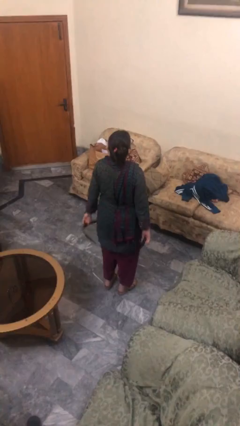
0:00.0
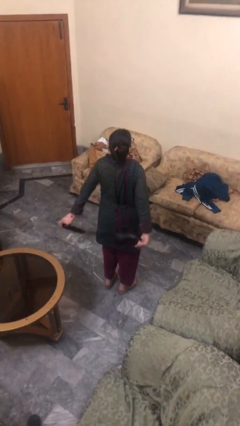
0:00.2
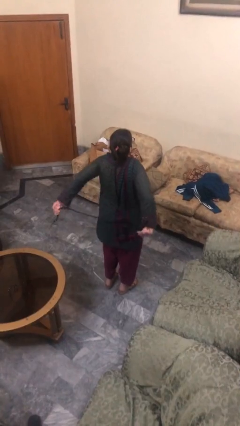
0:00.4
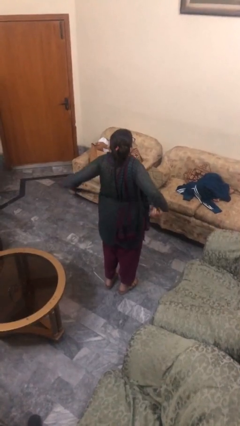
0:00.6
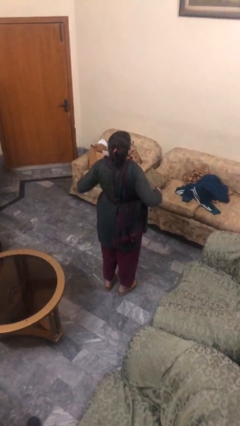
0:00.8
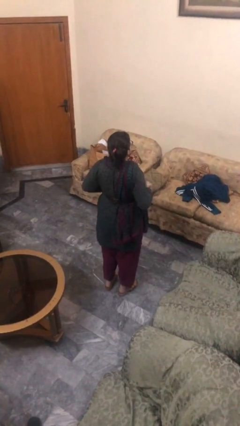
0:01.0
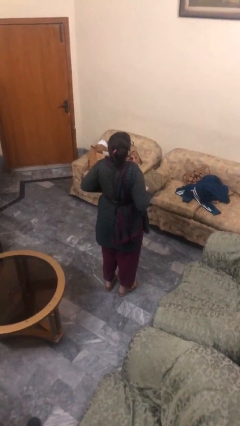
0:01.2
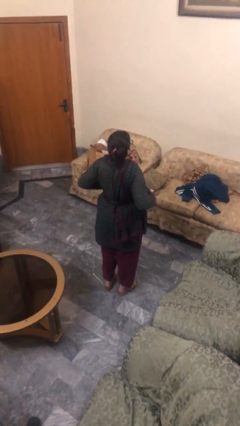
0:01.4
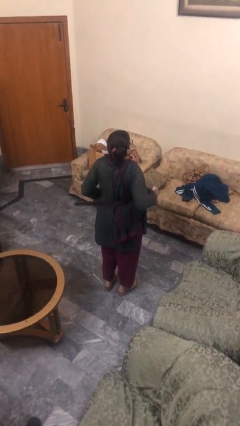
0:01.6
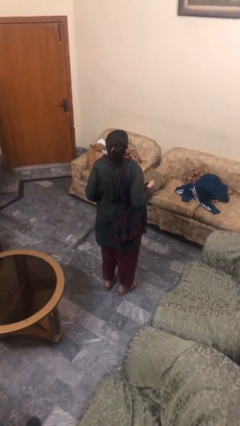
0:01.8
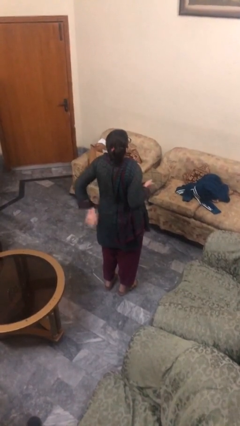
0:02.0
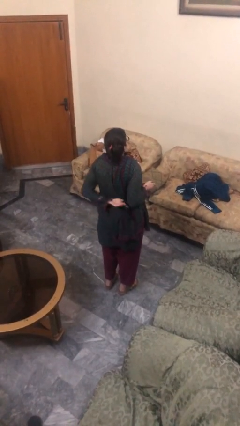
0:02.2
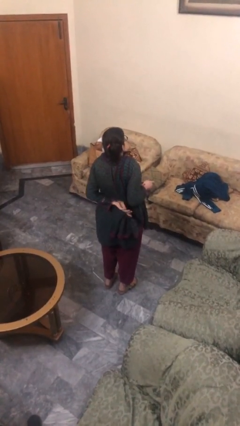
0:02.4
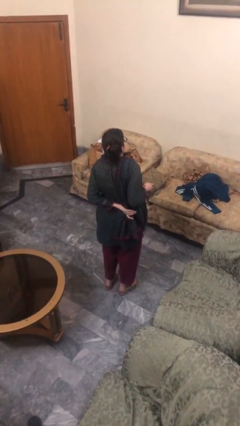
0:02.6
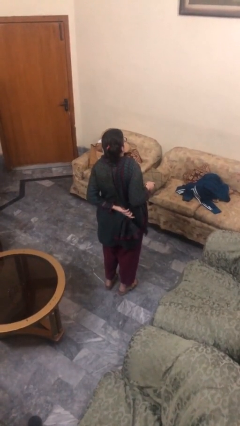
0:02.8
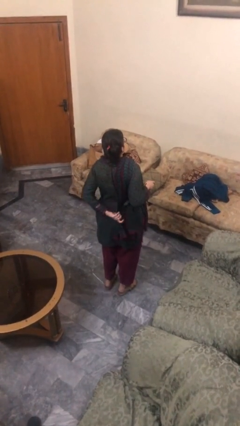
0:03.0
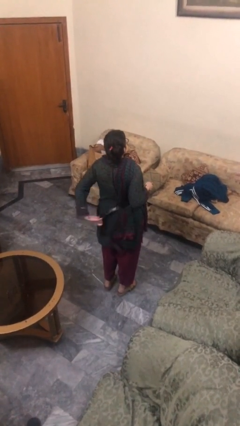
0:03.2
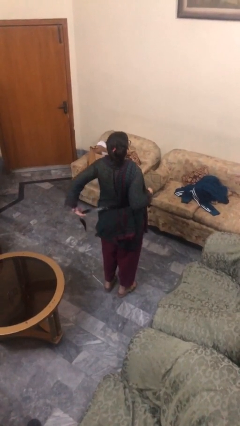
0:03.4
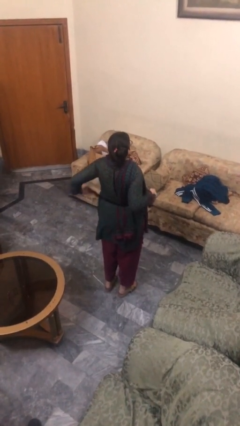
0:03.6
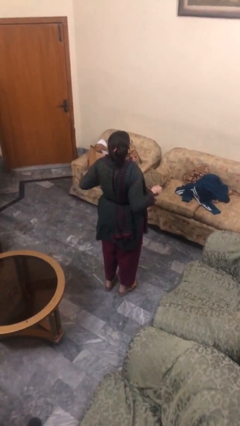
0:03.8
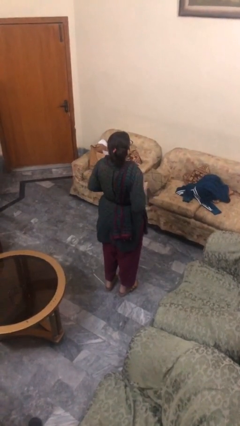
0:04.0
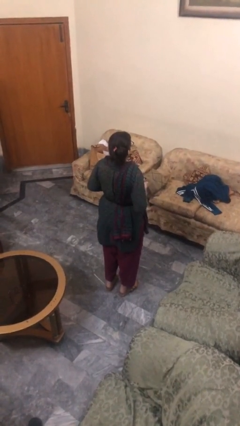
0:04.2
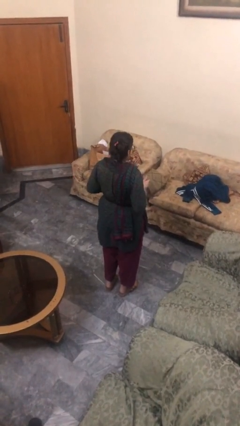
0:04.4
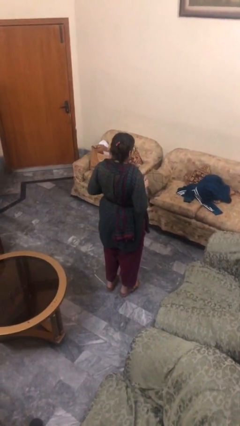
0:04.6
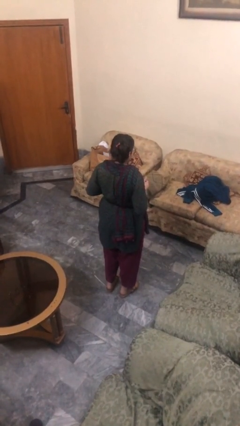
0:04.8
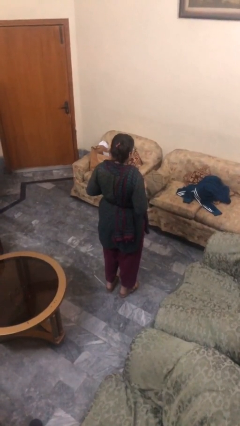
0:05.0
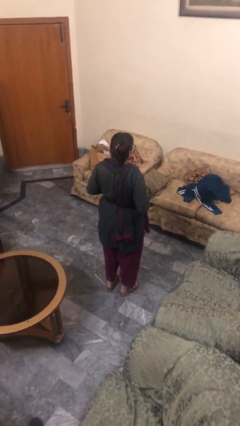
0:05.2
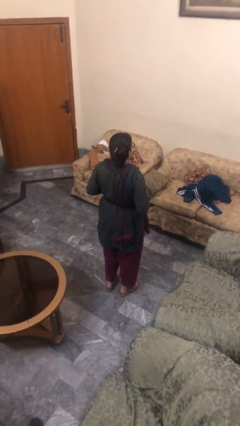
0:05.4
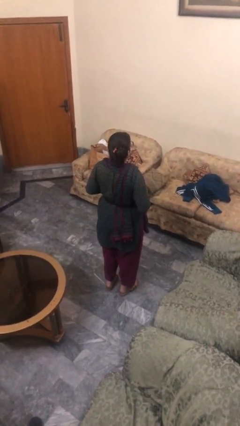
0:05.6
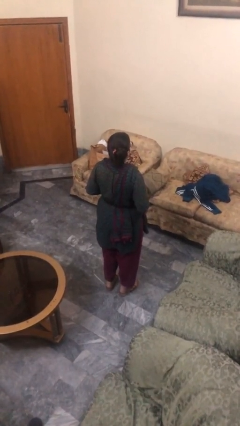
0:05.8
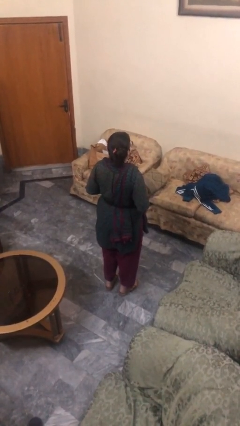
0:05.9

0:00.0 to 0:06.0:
person puts on belt

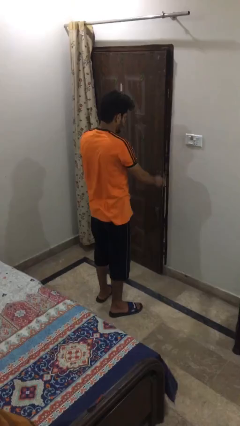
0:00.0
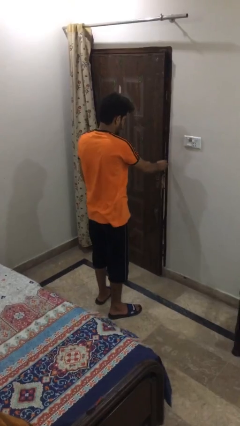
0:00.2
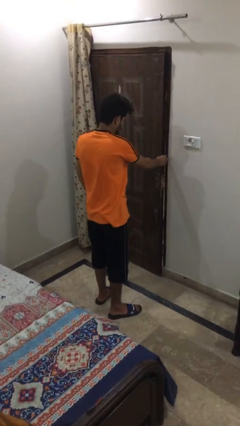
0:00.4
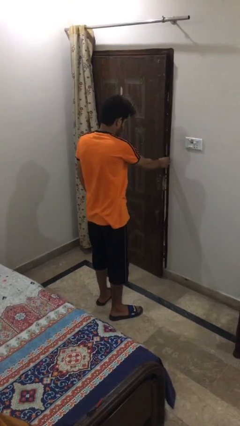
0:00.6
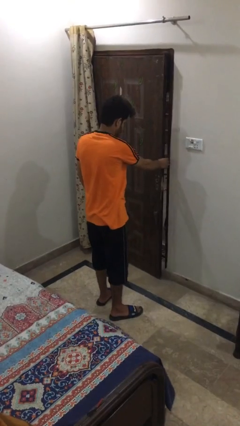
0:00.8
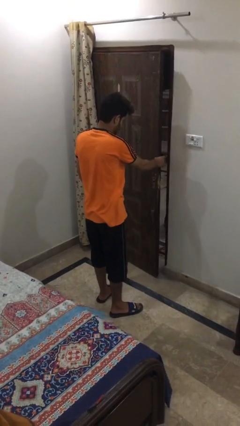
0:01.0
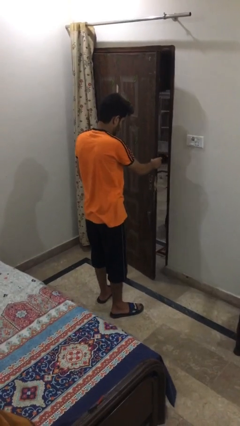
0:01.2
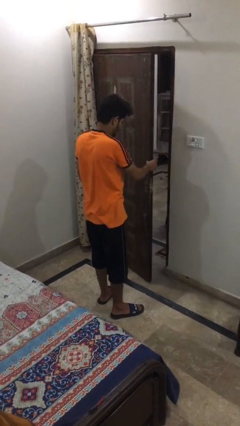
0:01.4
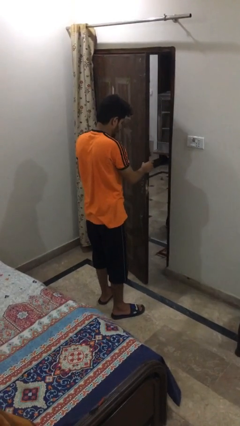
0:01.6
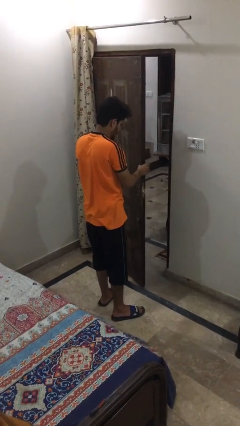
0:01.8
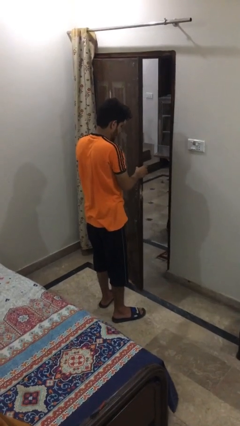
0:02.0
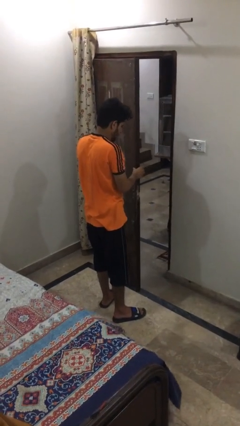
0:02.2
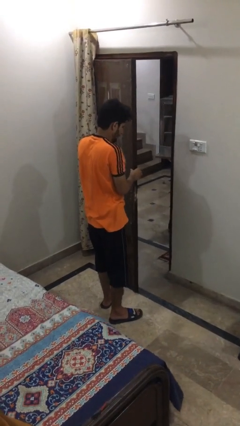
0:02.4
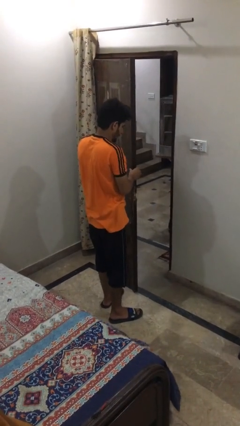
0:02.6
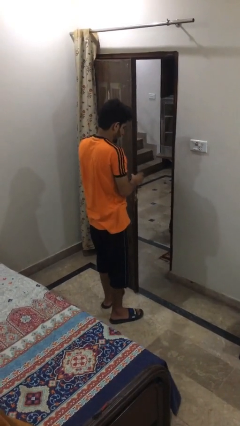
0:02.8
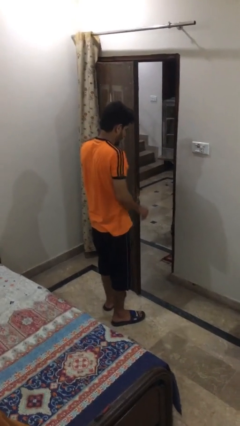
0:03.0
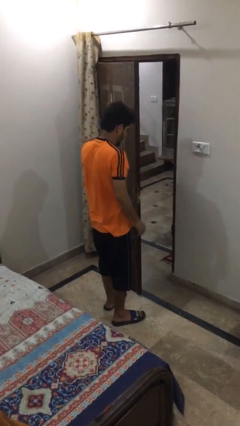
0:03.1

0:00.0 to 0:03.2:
person opens facility door

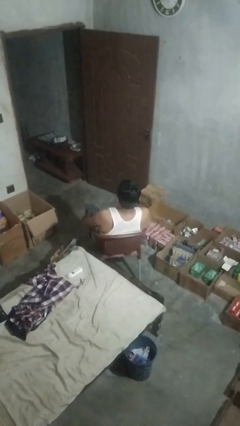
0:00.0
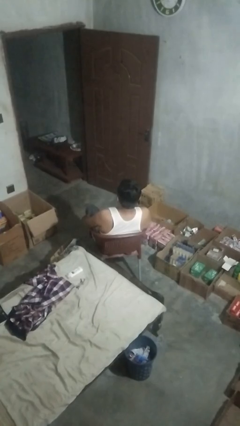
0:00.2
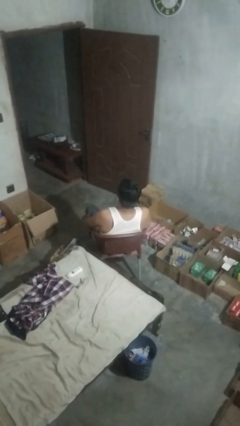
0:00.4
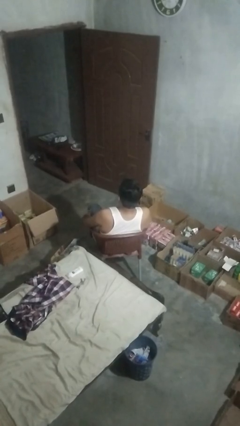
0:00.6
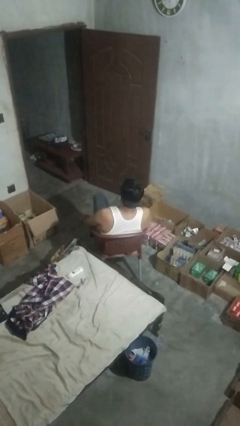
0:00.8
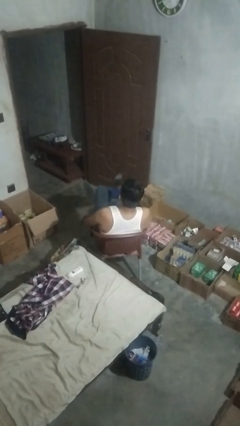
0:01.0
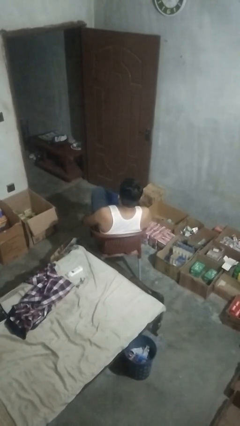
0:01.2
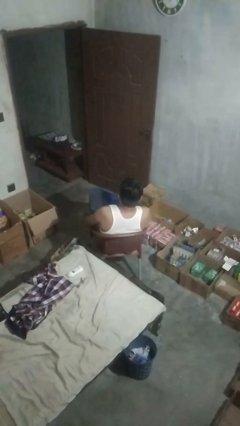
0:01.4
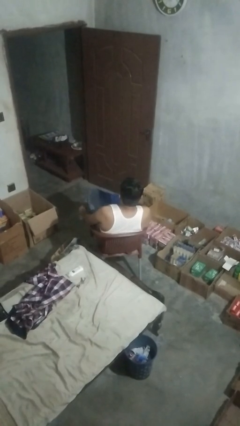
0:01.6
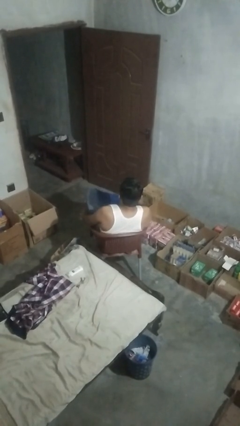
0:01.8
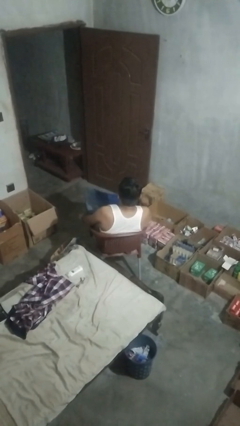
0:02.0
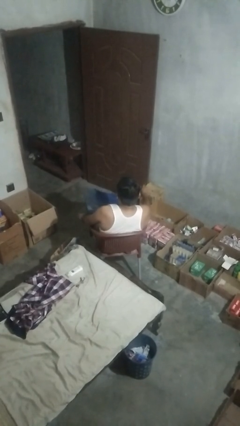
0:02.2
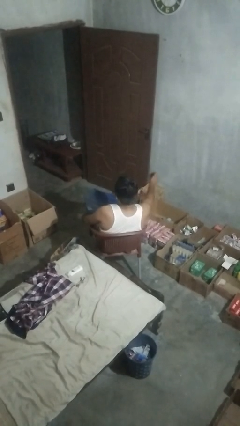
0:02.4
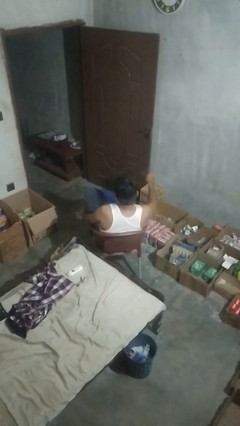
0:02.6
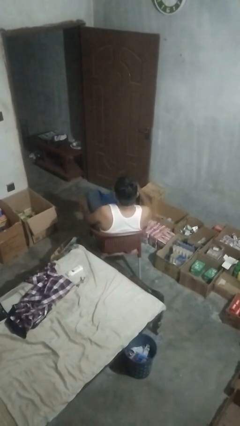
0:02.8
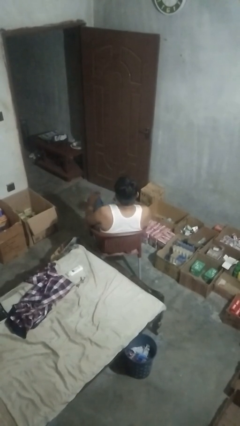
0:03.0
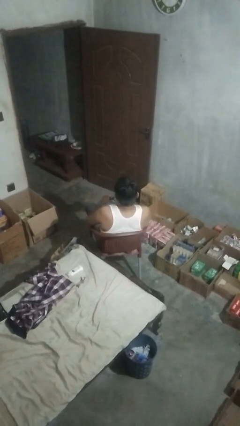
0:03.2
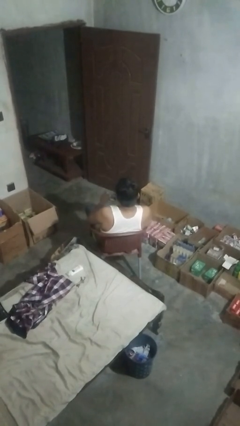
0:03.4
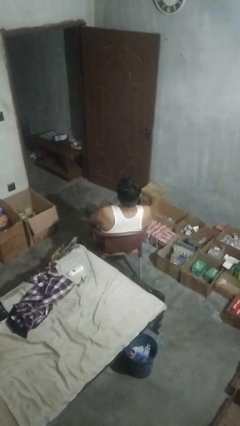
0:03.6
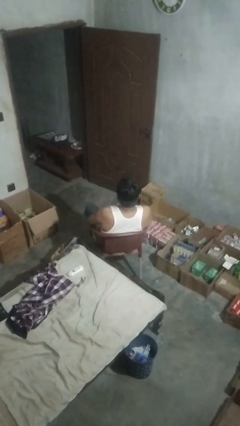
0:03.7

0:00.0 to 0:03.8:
person takes off socks

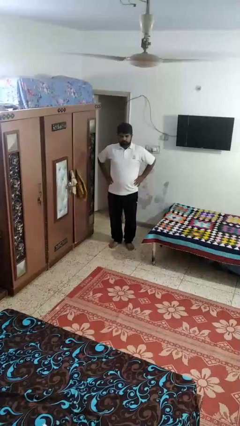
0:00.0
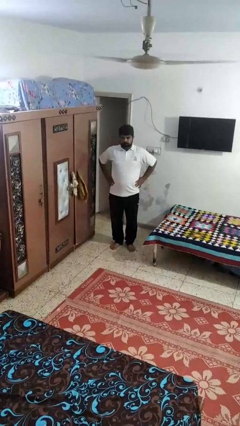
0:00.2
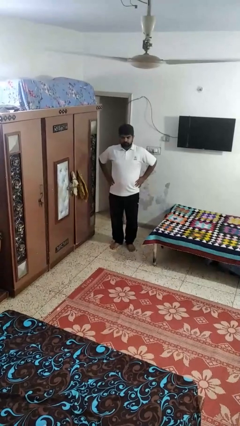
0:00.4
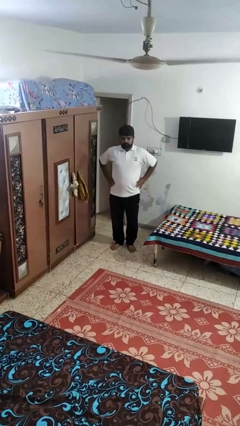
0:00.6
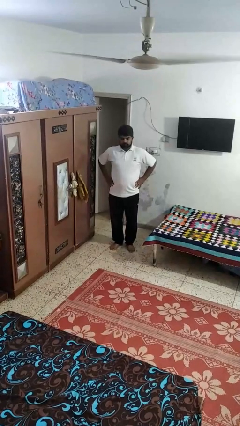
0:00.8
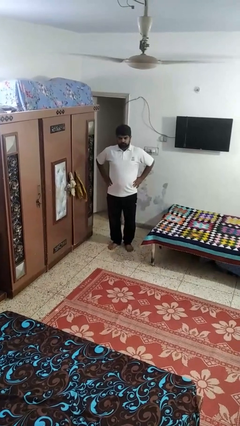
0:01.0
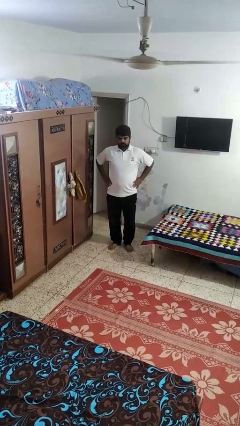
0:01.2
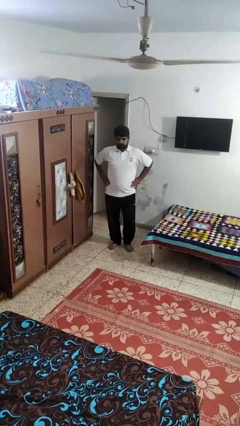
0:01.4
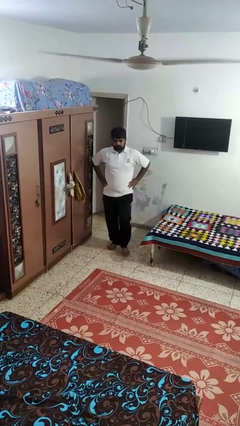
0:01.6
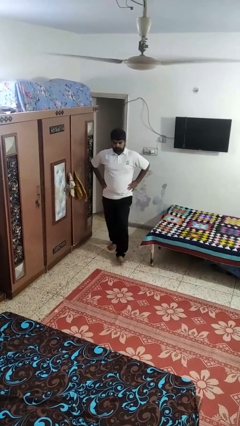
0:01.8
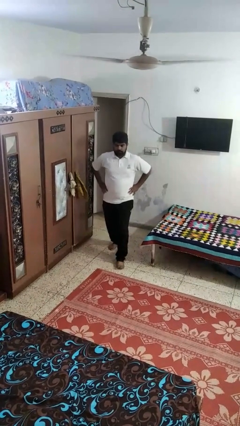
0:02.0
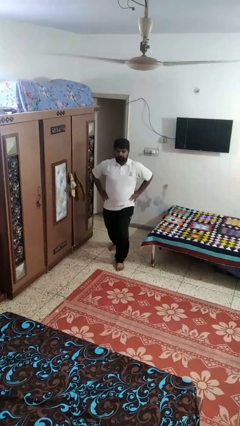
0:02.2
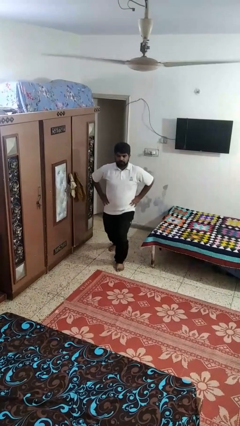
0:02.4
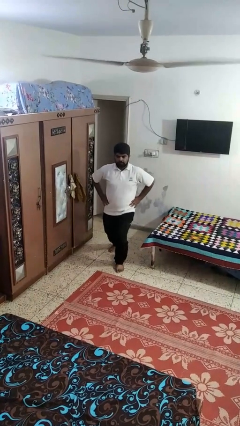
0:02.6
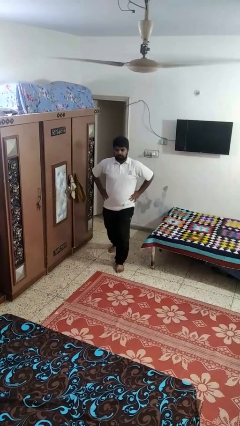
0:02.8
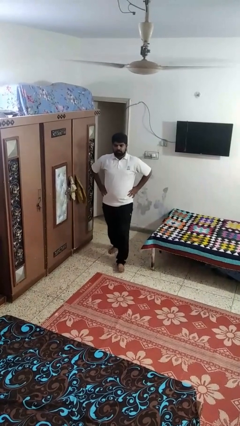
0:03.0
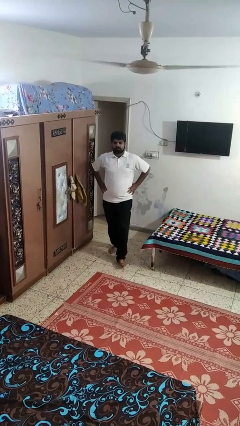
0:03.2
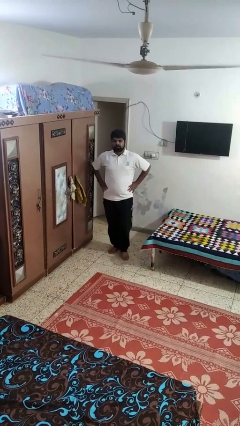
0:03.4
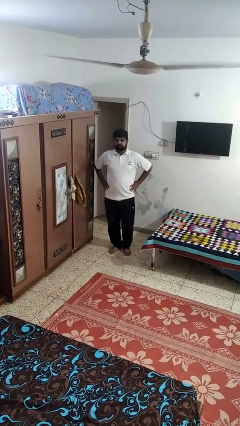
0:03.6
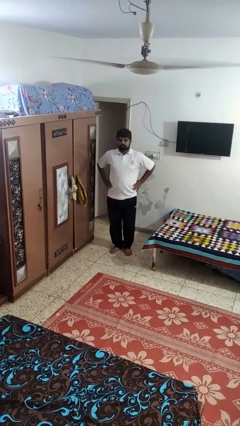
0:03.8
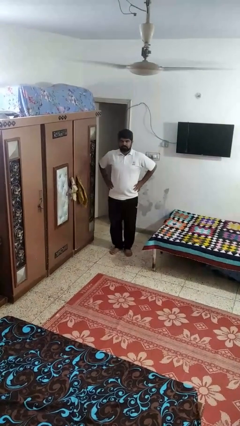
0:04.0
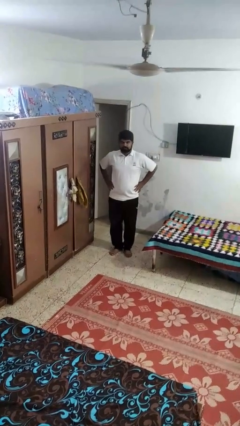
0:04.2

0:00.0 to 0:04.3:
person exercises with lunges

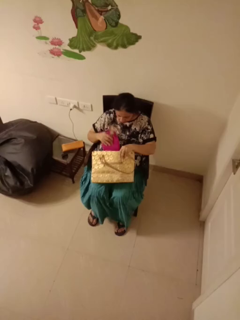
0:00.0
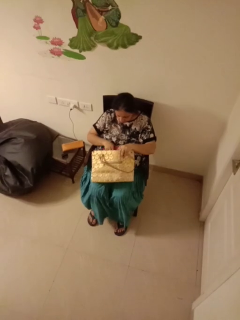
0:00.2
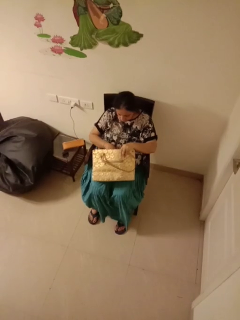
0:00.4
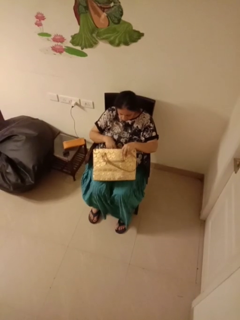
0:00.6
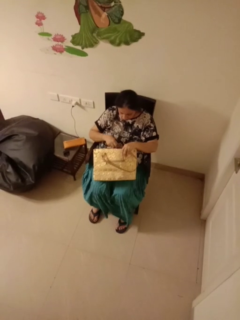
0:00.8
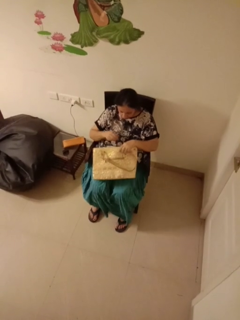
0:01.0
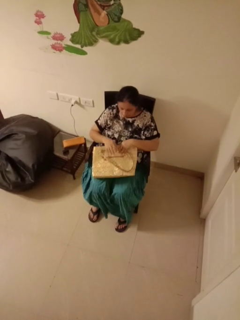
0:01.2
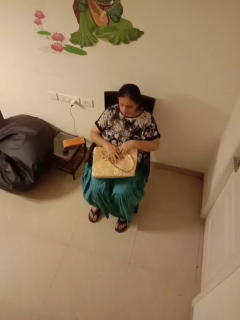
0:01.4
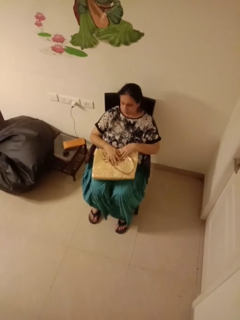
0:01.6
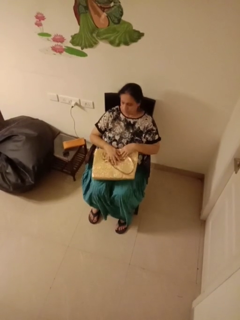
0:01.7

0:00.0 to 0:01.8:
person puts object into purse
